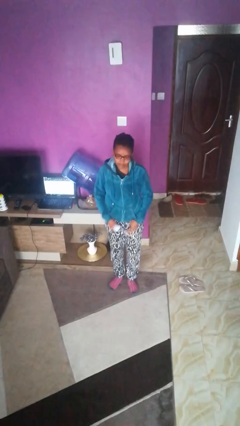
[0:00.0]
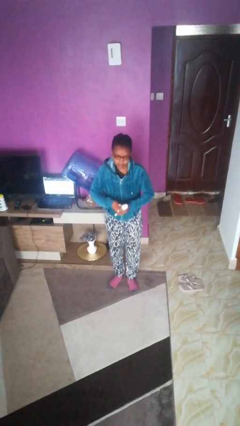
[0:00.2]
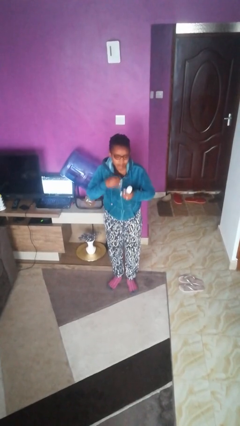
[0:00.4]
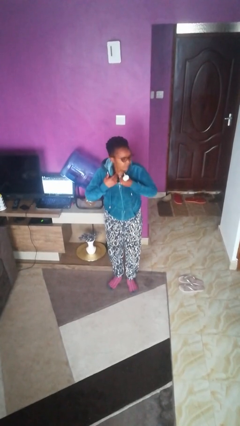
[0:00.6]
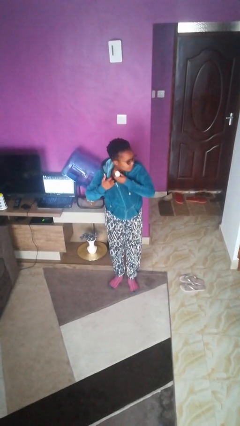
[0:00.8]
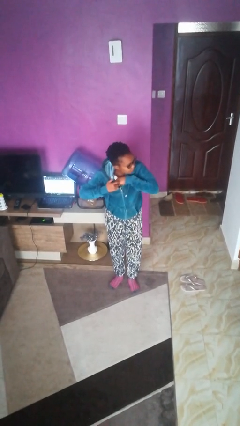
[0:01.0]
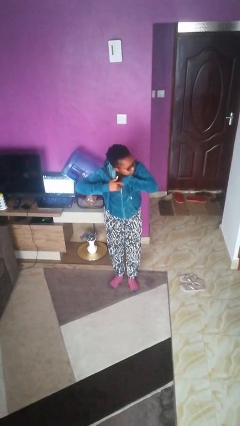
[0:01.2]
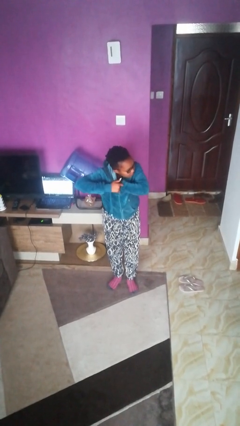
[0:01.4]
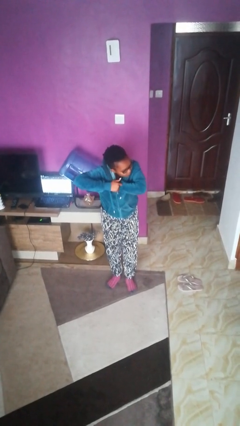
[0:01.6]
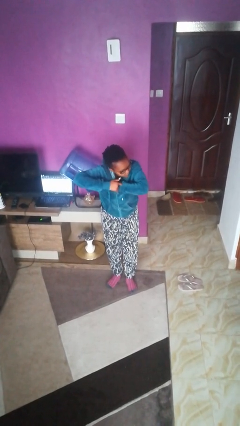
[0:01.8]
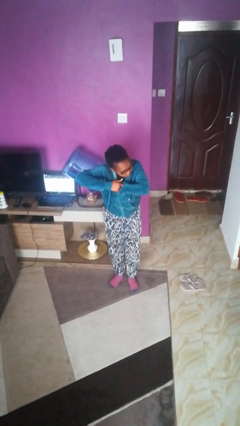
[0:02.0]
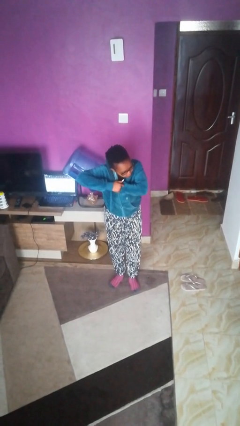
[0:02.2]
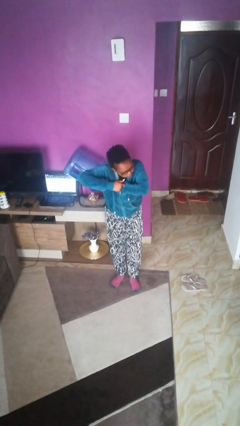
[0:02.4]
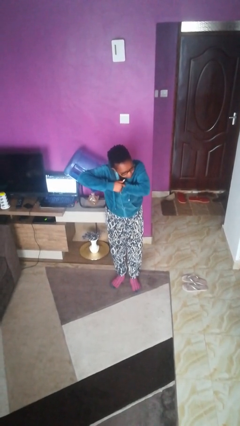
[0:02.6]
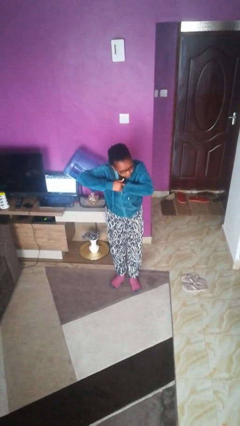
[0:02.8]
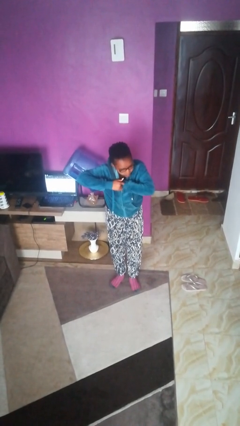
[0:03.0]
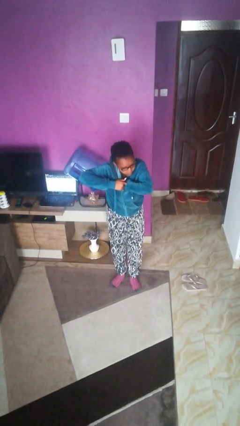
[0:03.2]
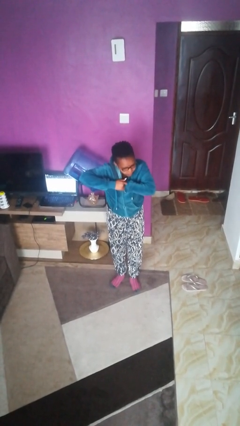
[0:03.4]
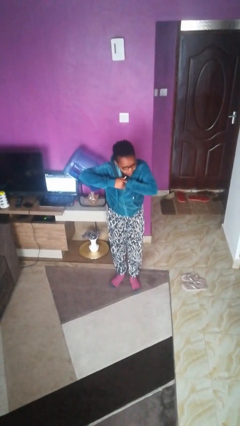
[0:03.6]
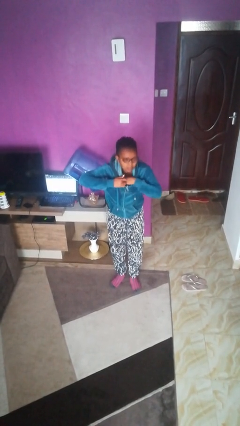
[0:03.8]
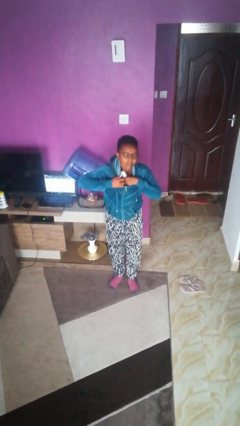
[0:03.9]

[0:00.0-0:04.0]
person applies deodorant

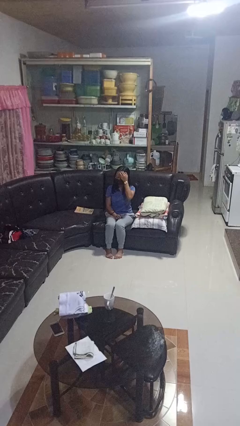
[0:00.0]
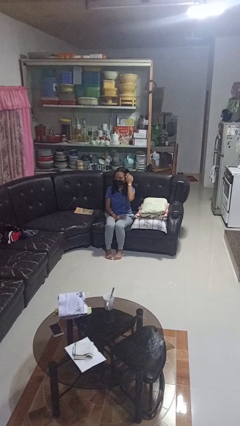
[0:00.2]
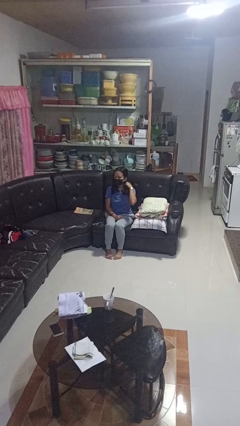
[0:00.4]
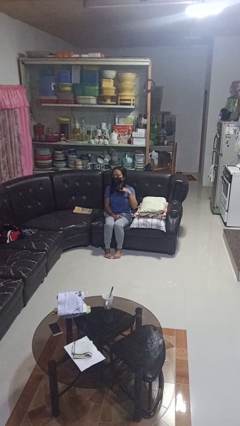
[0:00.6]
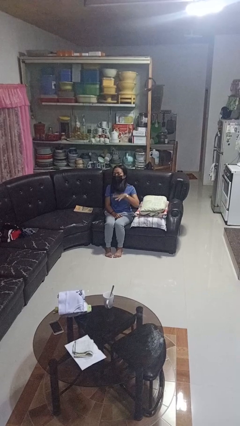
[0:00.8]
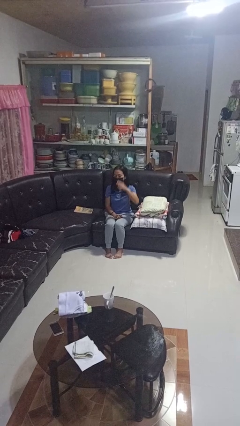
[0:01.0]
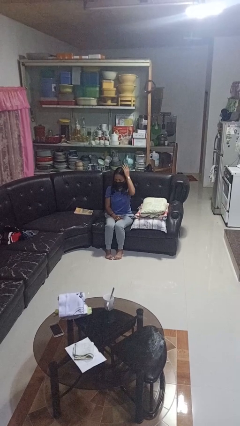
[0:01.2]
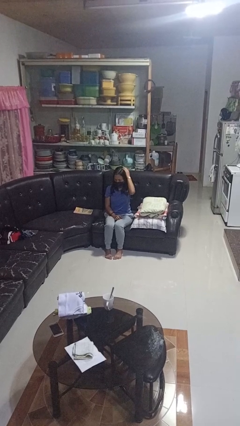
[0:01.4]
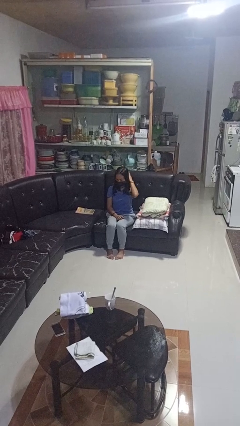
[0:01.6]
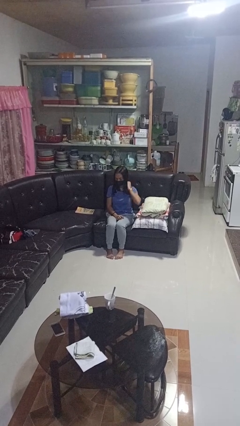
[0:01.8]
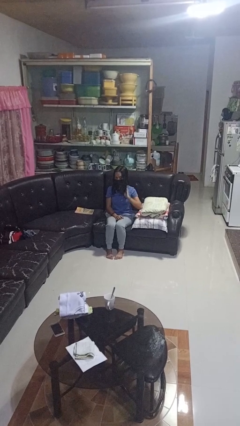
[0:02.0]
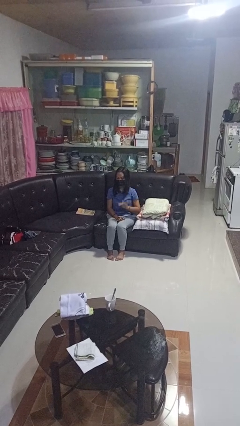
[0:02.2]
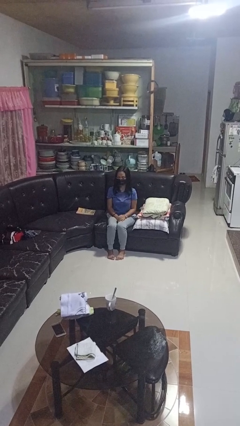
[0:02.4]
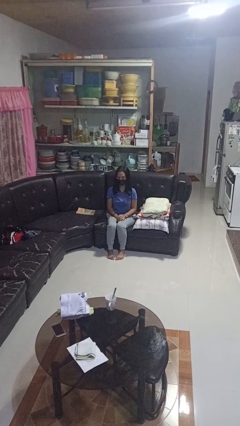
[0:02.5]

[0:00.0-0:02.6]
person strokes hair

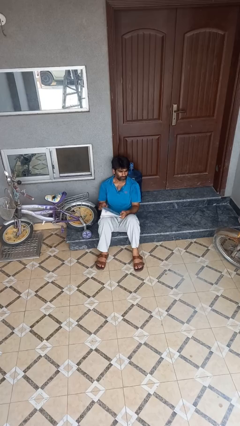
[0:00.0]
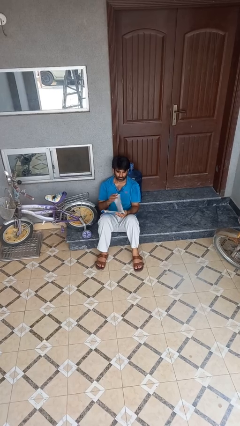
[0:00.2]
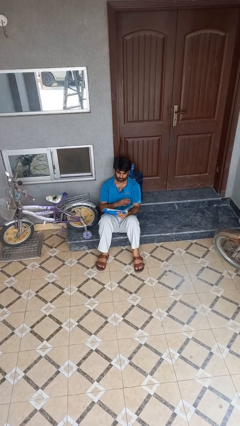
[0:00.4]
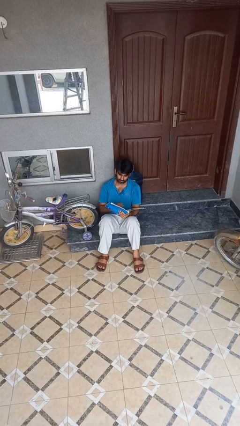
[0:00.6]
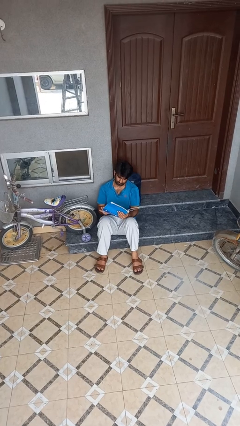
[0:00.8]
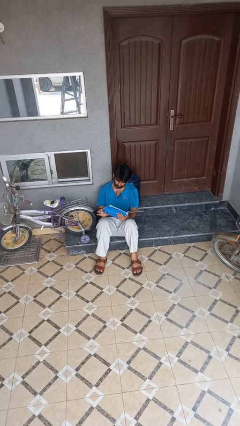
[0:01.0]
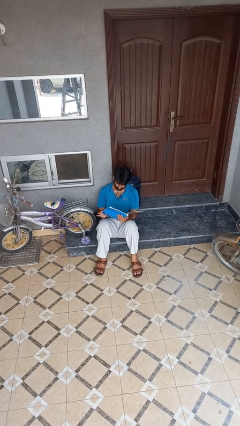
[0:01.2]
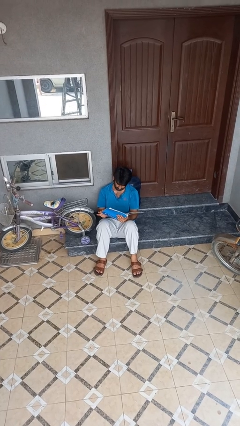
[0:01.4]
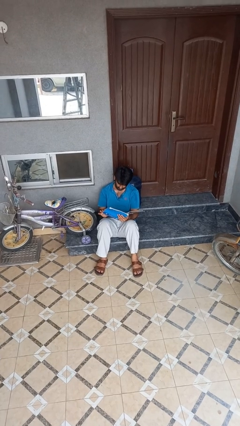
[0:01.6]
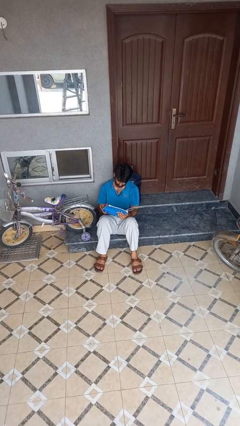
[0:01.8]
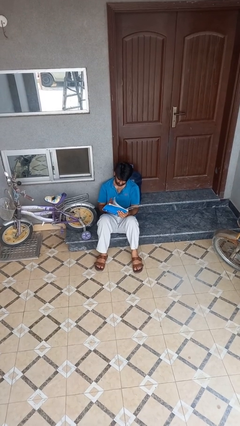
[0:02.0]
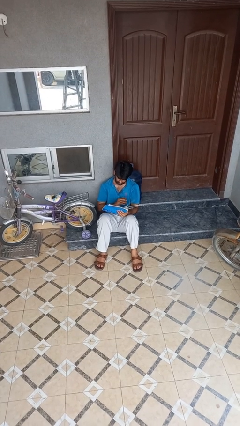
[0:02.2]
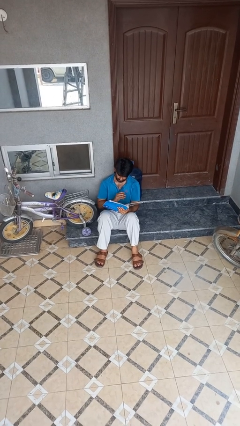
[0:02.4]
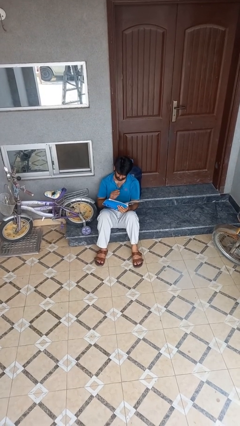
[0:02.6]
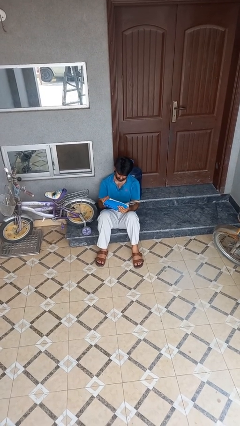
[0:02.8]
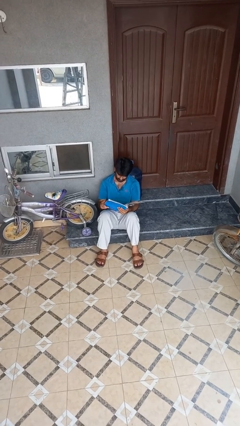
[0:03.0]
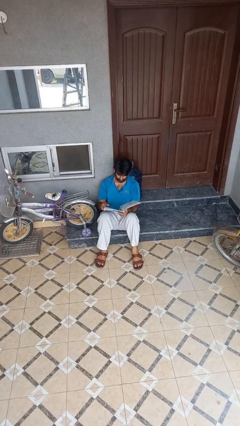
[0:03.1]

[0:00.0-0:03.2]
person reads book

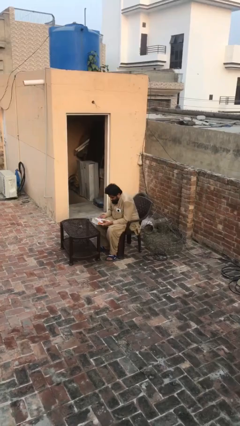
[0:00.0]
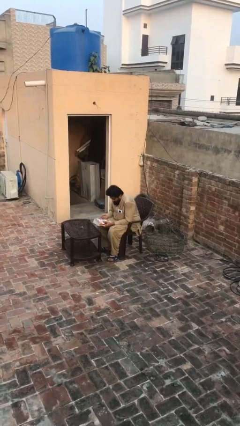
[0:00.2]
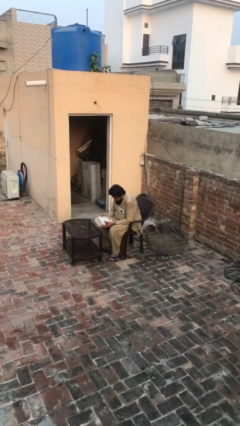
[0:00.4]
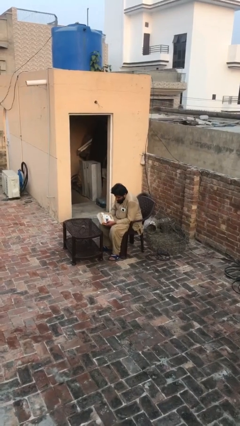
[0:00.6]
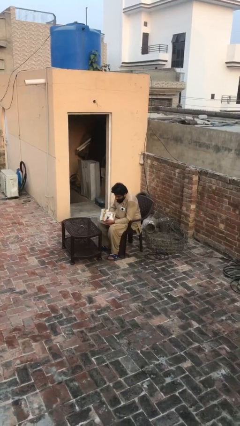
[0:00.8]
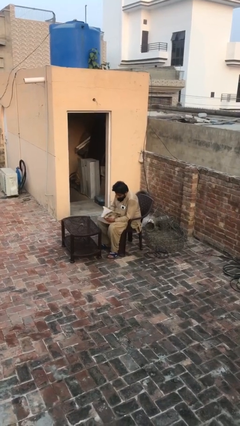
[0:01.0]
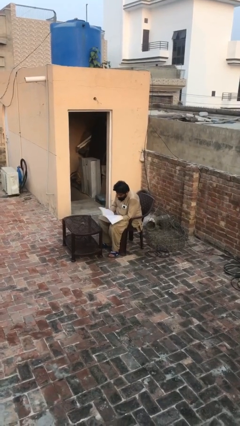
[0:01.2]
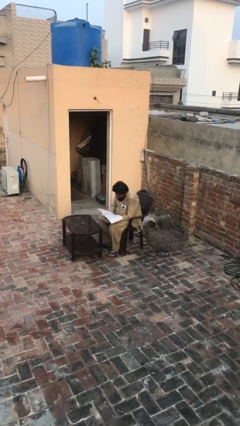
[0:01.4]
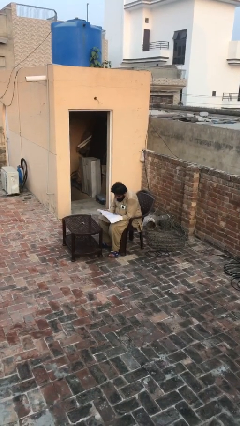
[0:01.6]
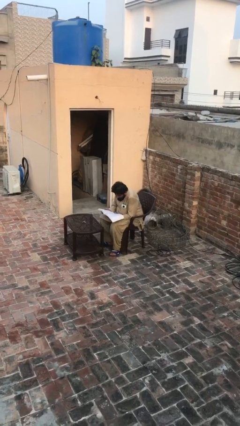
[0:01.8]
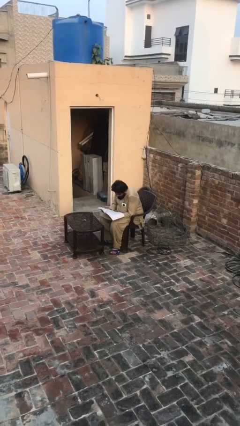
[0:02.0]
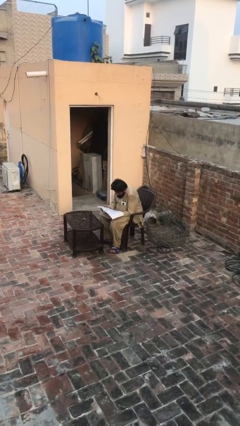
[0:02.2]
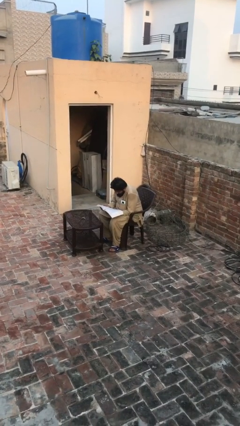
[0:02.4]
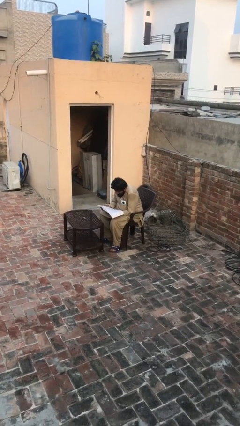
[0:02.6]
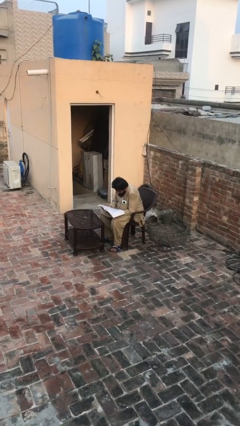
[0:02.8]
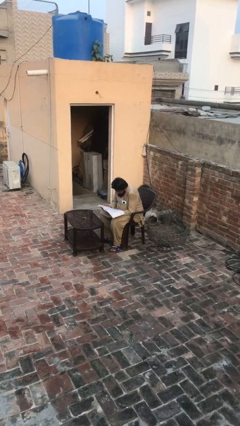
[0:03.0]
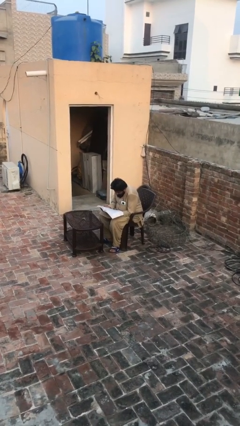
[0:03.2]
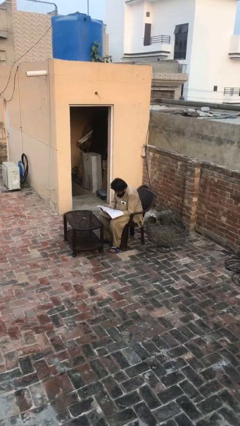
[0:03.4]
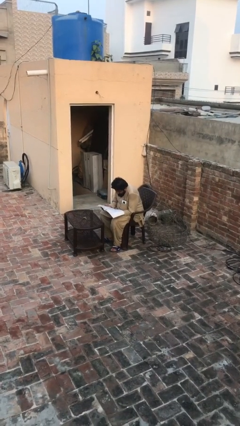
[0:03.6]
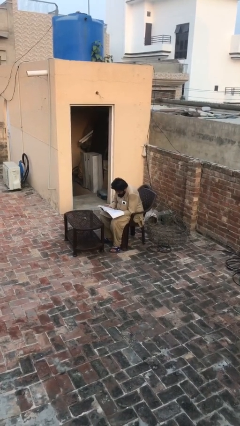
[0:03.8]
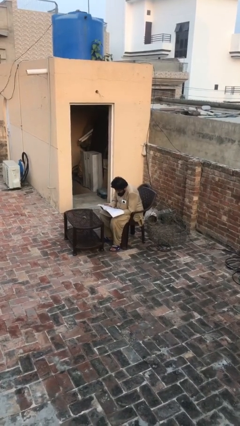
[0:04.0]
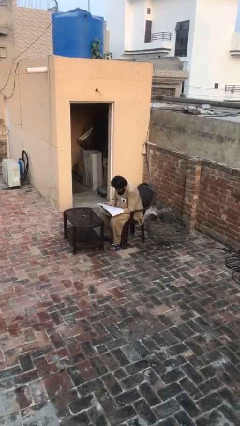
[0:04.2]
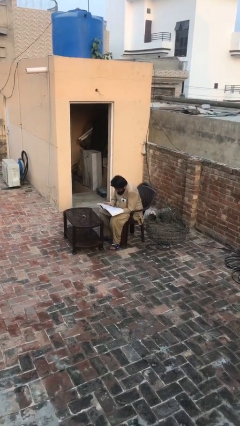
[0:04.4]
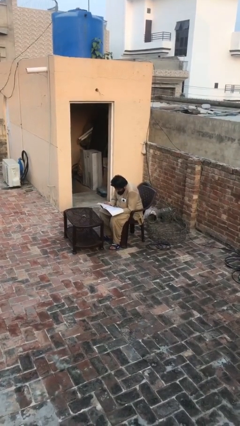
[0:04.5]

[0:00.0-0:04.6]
person reads document

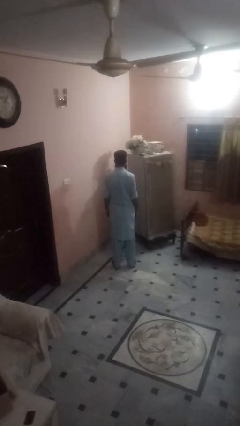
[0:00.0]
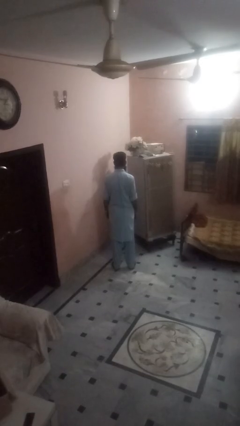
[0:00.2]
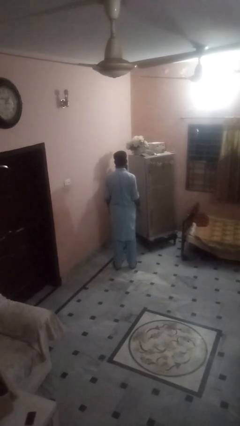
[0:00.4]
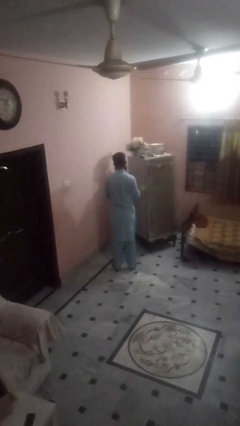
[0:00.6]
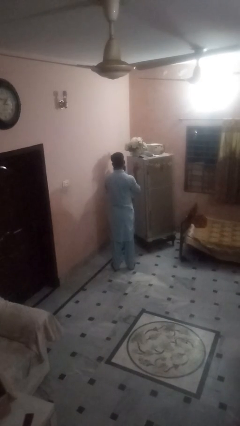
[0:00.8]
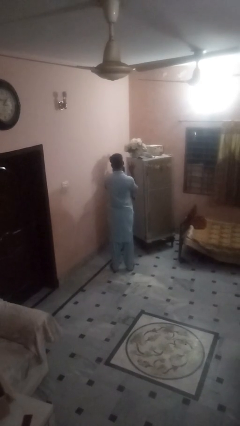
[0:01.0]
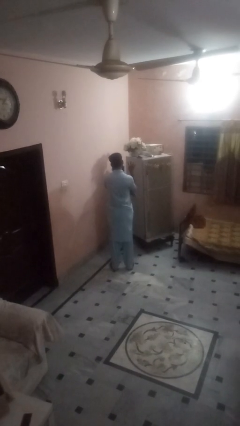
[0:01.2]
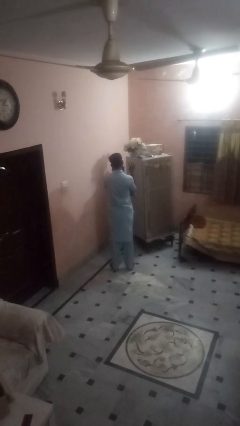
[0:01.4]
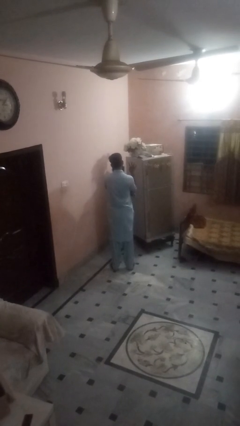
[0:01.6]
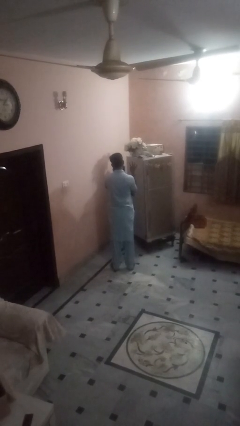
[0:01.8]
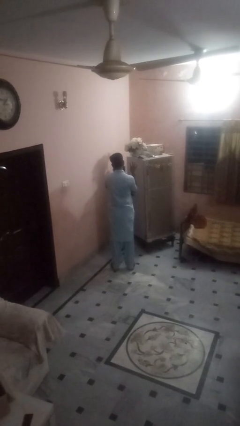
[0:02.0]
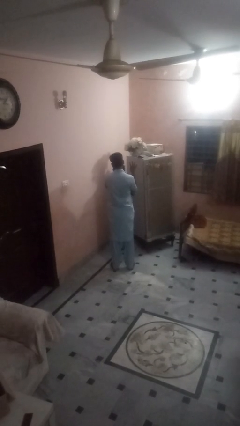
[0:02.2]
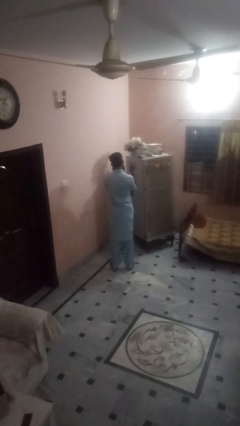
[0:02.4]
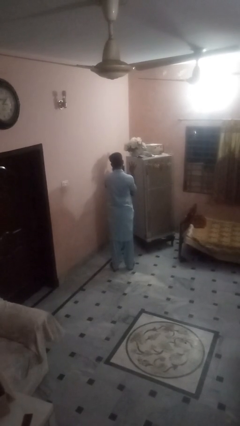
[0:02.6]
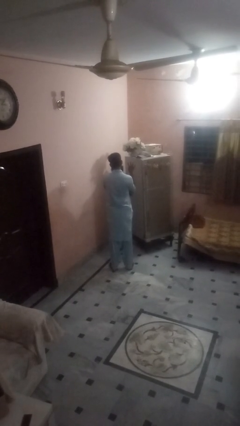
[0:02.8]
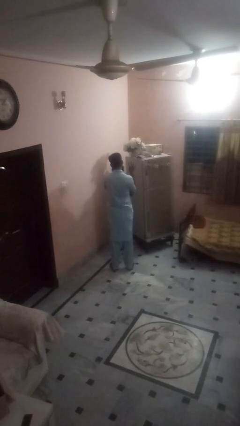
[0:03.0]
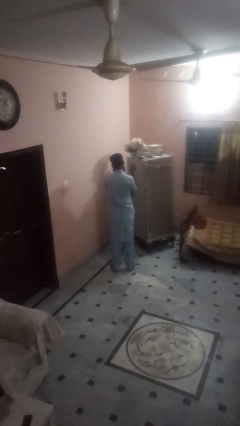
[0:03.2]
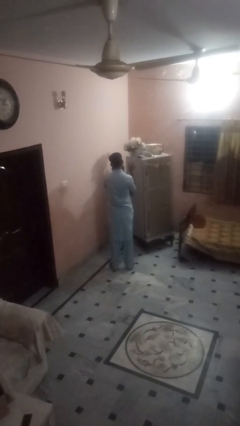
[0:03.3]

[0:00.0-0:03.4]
person gestures number four
